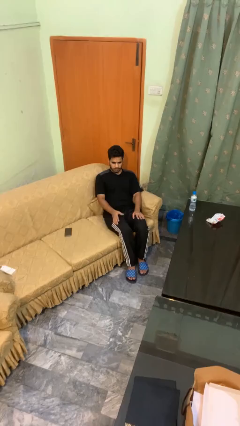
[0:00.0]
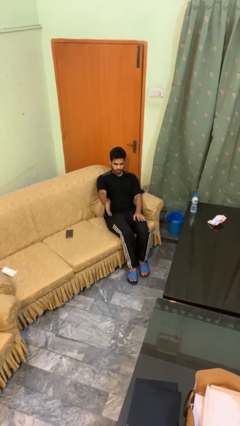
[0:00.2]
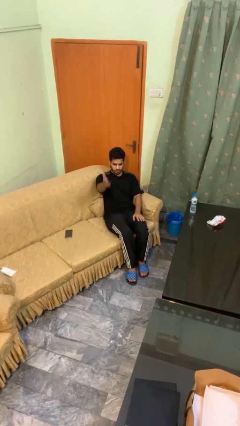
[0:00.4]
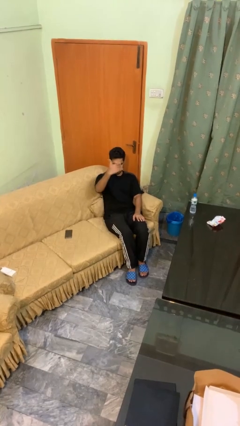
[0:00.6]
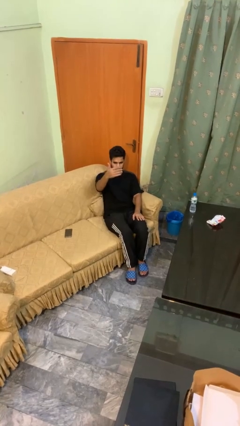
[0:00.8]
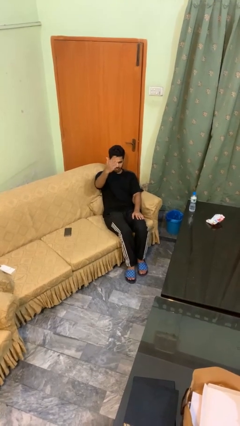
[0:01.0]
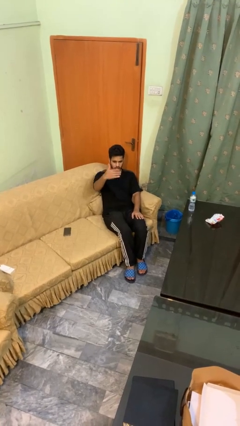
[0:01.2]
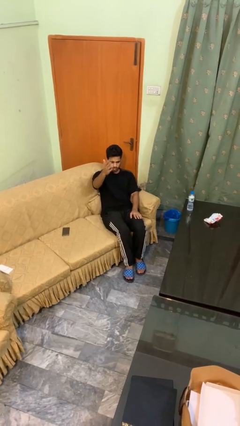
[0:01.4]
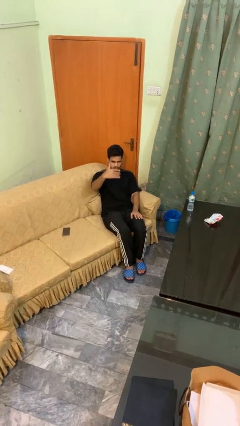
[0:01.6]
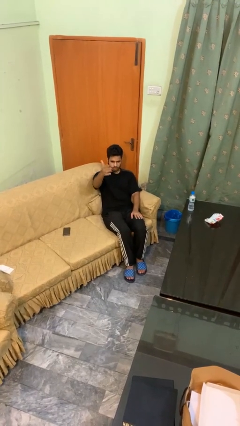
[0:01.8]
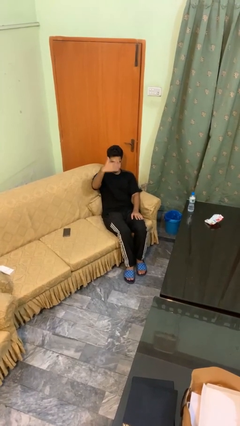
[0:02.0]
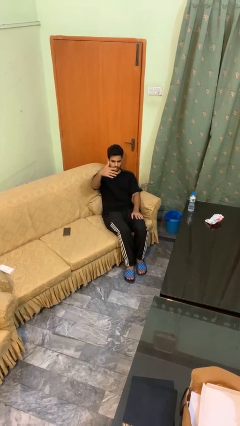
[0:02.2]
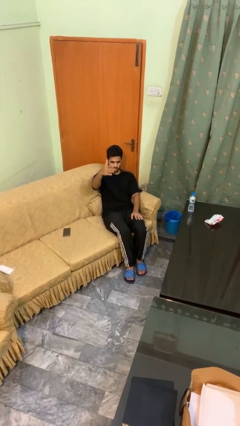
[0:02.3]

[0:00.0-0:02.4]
person gestures come here

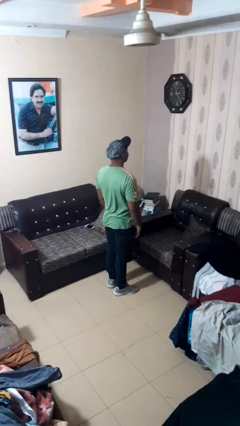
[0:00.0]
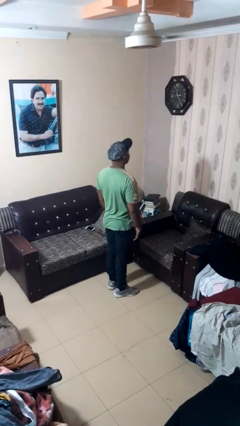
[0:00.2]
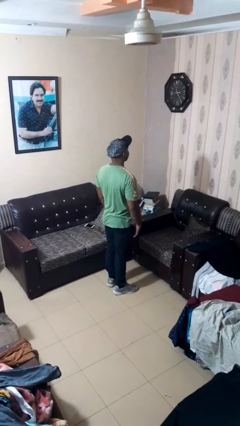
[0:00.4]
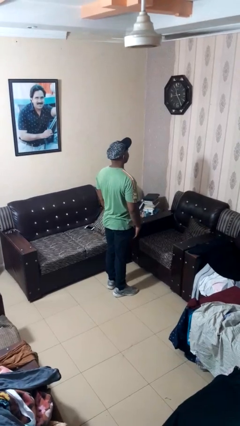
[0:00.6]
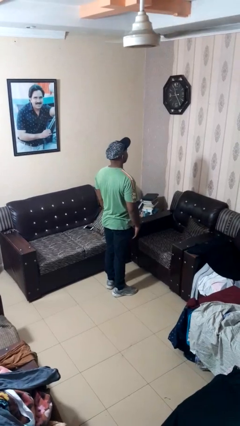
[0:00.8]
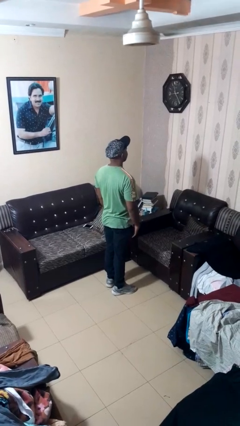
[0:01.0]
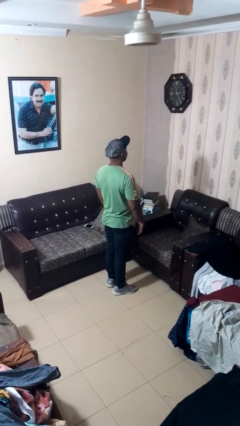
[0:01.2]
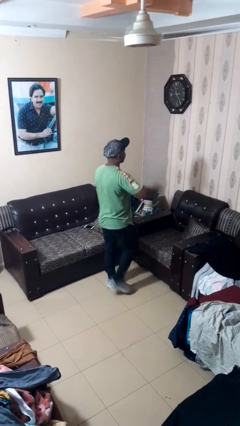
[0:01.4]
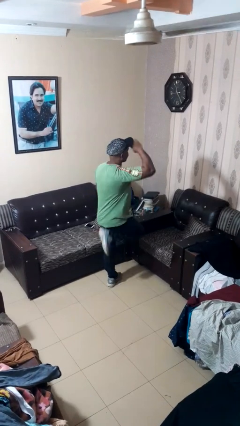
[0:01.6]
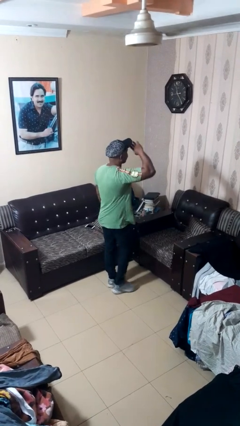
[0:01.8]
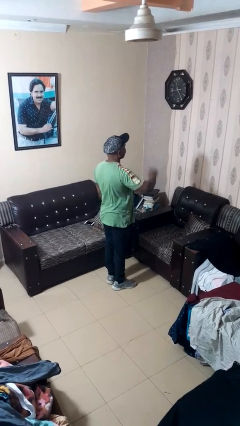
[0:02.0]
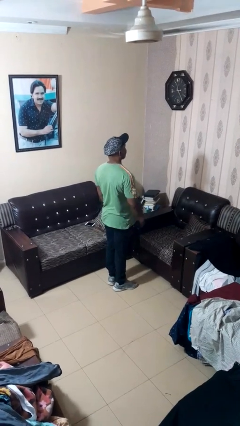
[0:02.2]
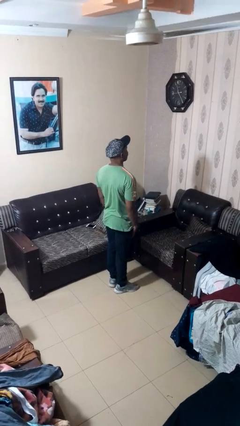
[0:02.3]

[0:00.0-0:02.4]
person salutes

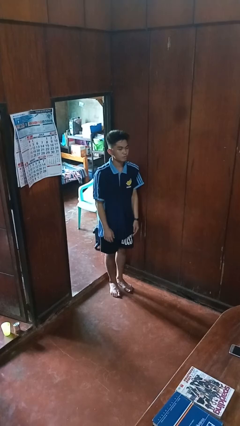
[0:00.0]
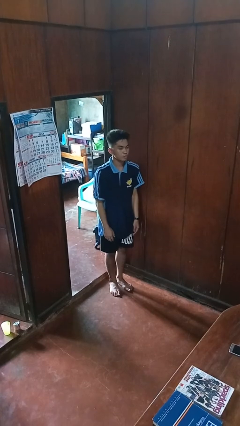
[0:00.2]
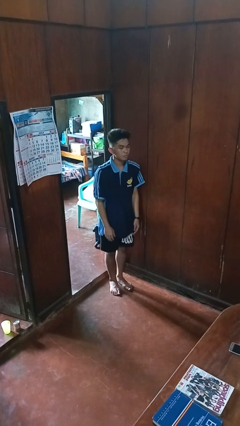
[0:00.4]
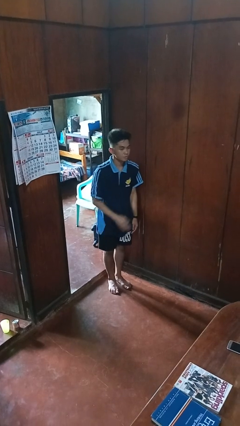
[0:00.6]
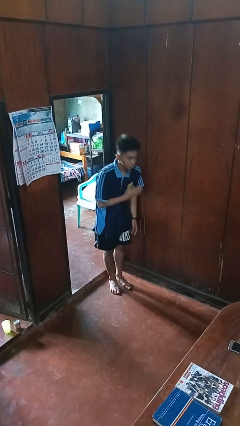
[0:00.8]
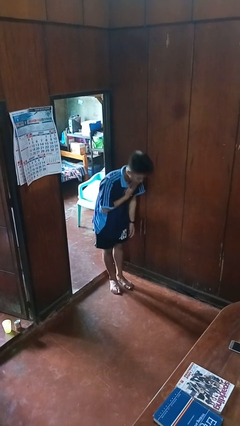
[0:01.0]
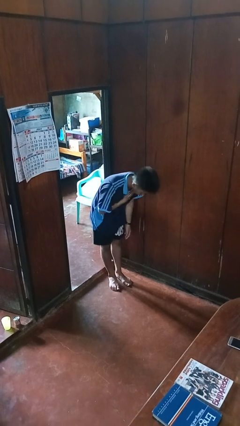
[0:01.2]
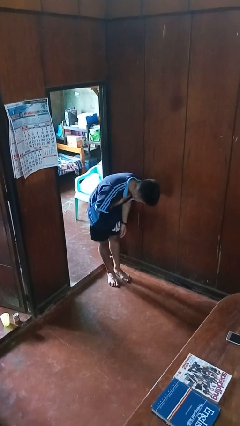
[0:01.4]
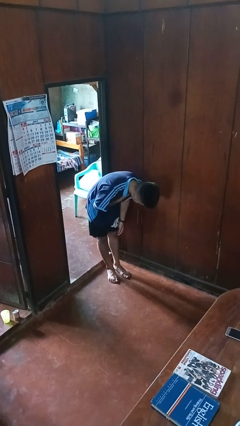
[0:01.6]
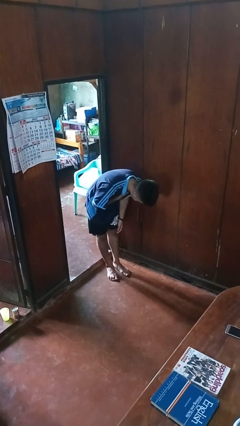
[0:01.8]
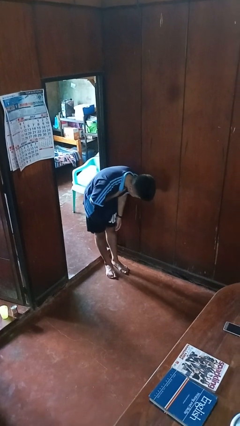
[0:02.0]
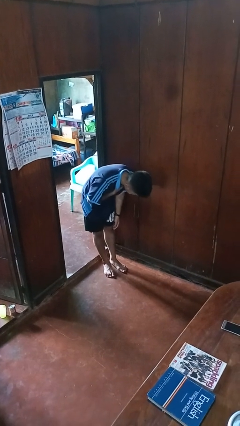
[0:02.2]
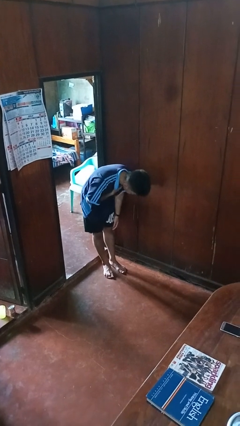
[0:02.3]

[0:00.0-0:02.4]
person bows

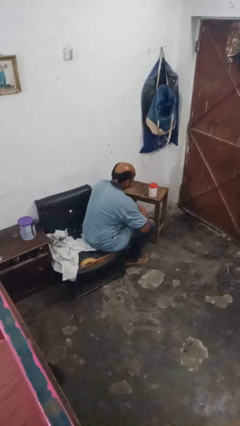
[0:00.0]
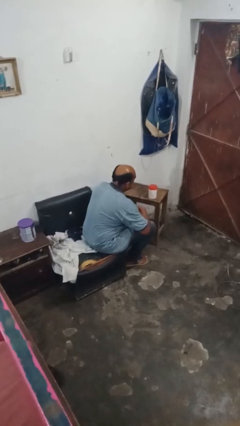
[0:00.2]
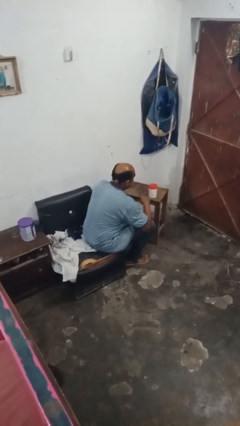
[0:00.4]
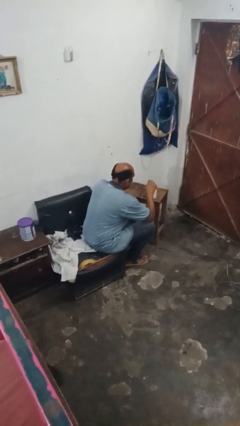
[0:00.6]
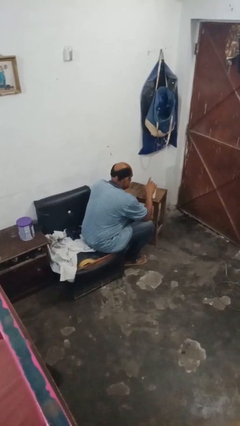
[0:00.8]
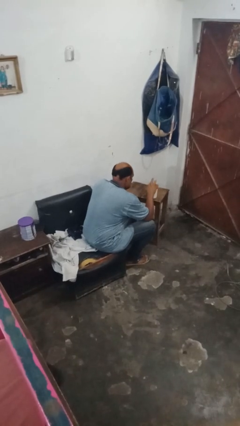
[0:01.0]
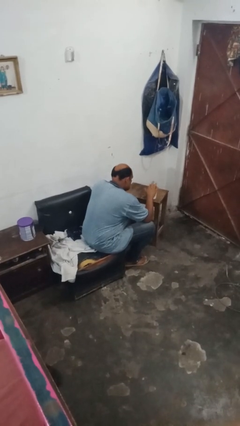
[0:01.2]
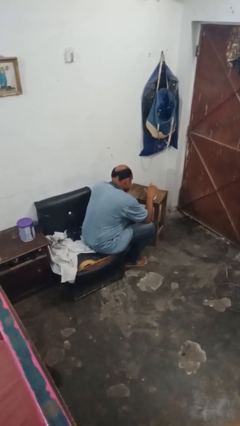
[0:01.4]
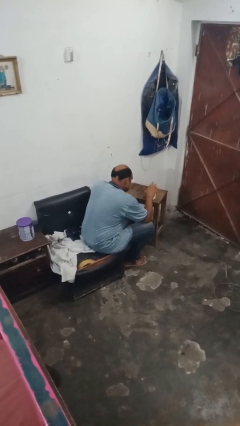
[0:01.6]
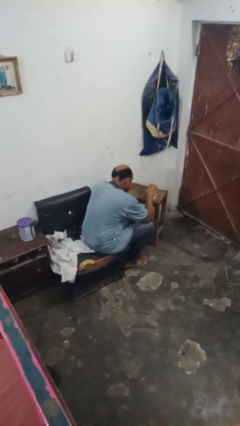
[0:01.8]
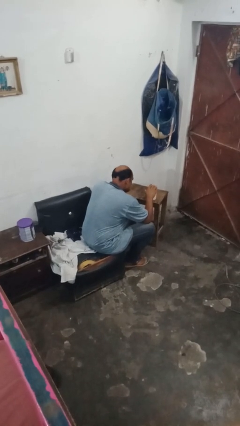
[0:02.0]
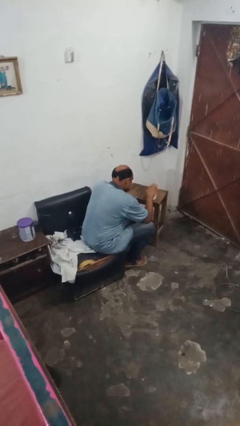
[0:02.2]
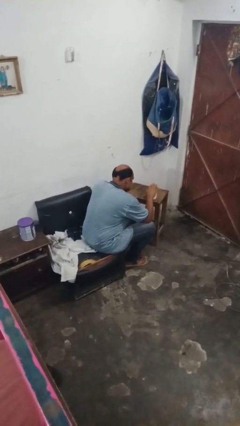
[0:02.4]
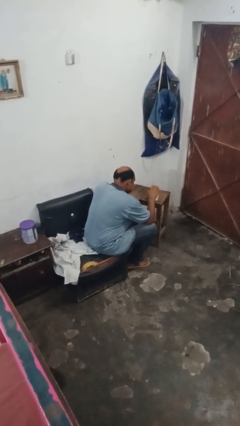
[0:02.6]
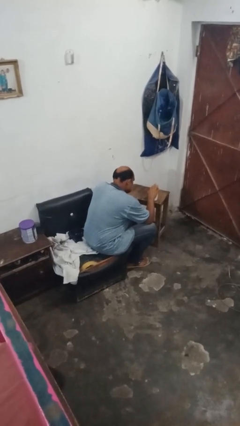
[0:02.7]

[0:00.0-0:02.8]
person taps object with finger

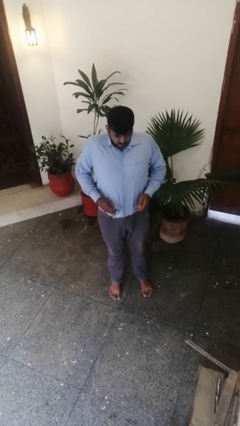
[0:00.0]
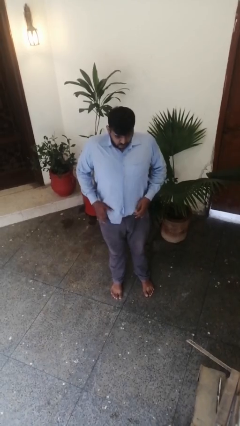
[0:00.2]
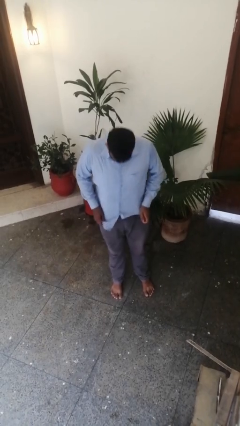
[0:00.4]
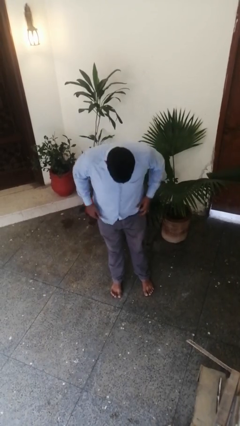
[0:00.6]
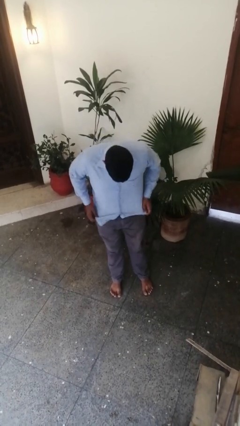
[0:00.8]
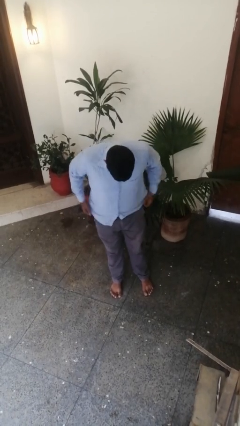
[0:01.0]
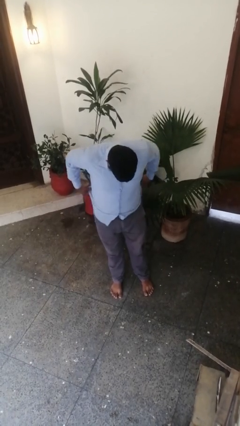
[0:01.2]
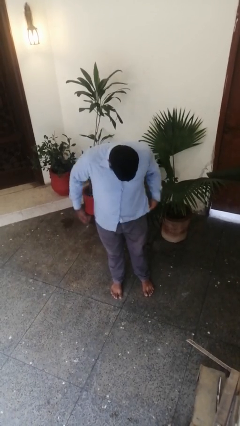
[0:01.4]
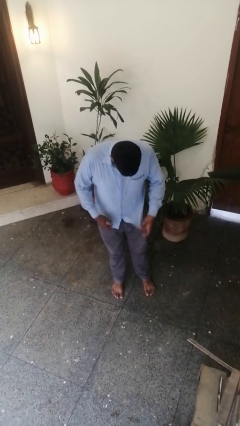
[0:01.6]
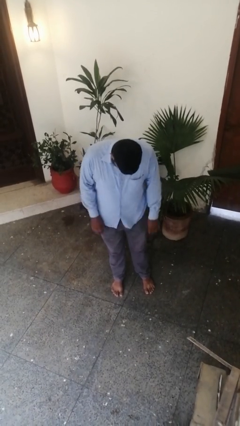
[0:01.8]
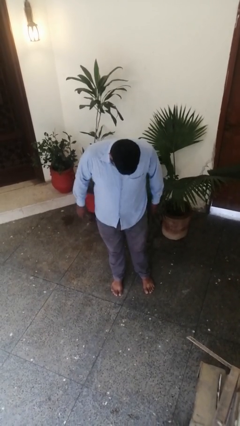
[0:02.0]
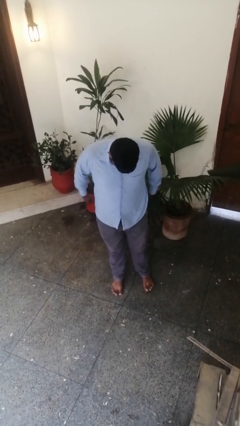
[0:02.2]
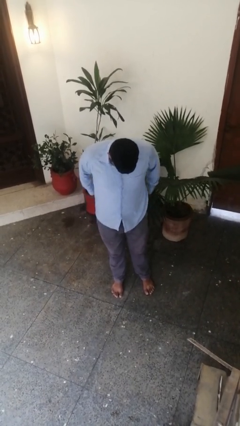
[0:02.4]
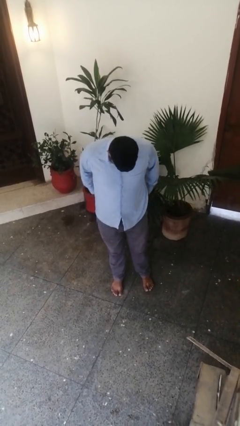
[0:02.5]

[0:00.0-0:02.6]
person untucks shirt

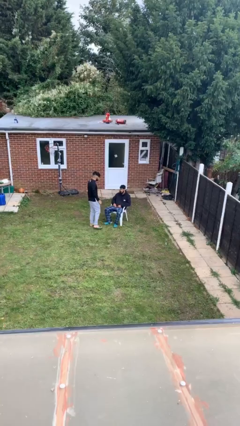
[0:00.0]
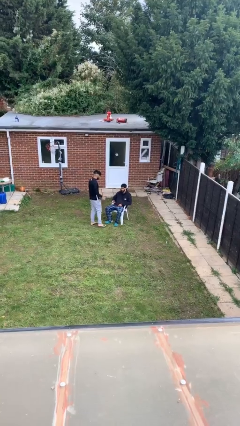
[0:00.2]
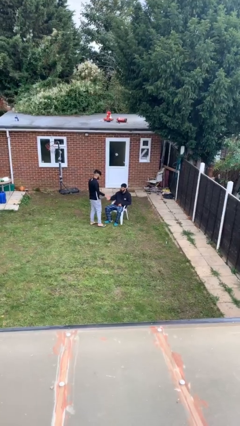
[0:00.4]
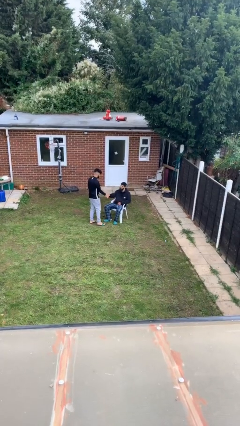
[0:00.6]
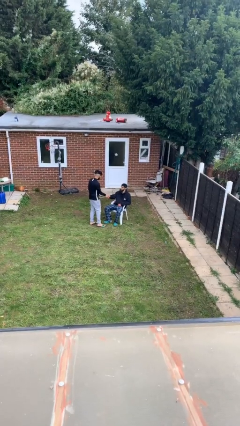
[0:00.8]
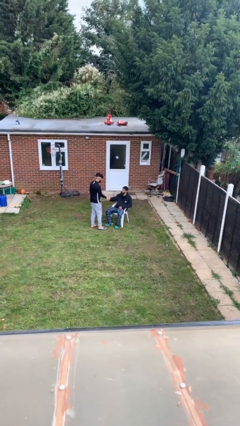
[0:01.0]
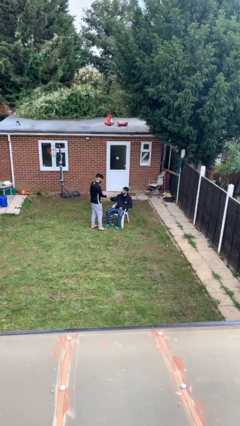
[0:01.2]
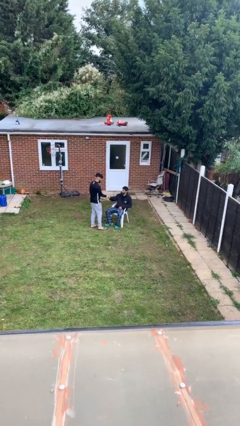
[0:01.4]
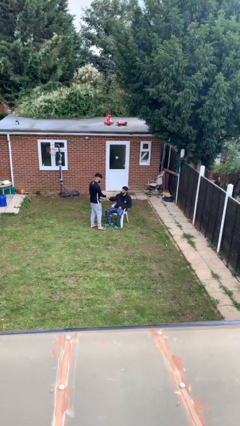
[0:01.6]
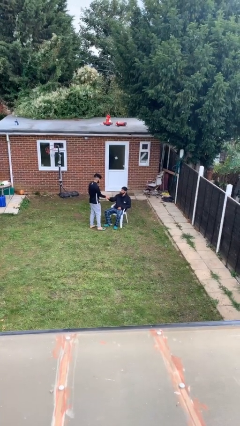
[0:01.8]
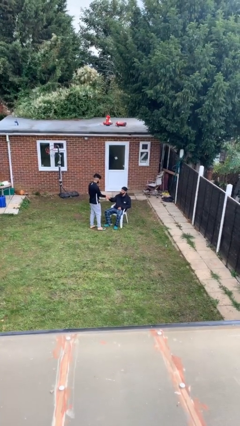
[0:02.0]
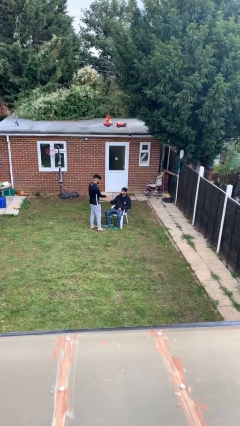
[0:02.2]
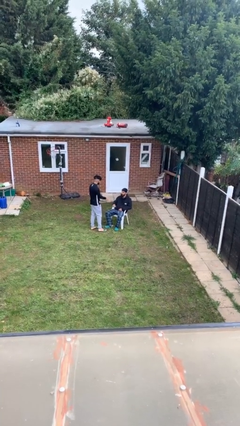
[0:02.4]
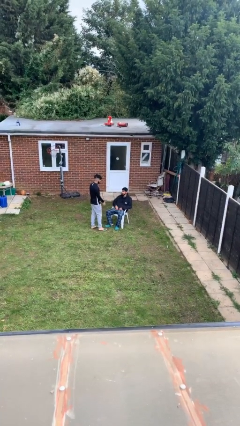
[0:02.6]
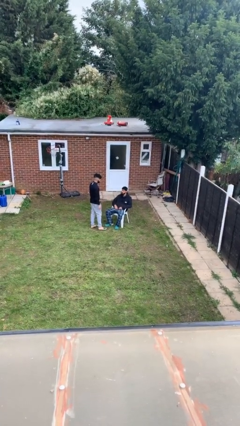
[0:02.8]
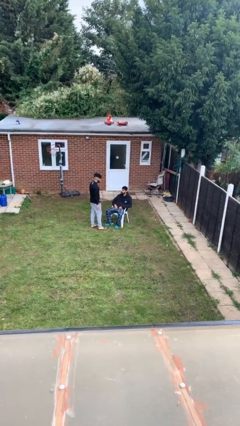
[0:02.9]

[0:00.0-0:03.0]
person shakes hand

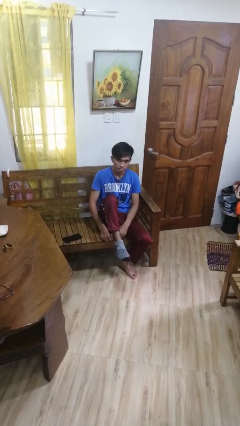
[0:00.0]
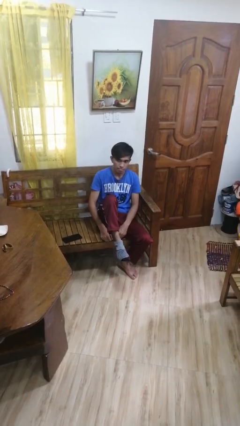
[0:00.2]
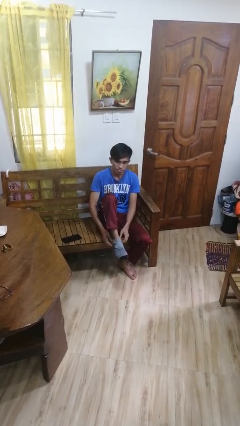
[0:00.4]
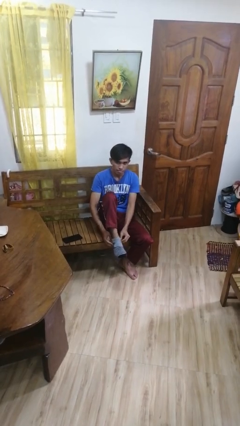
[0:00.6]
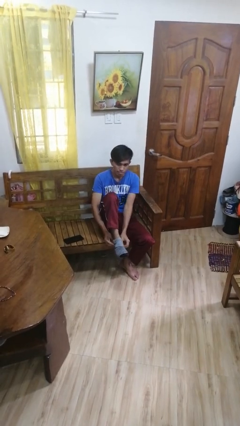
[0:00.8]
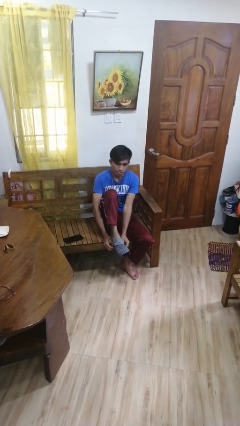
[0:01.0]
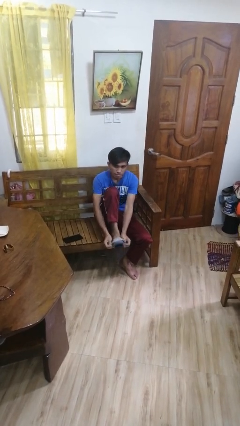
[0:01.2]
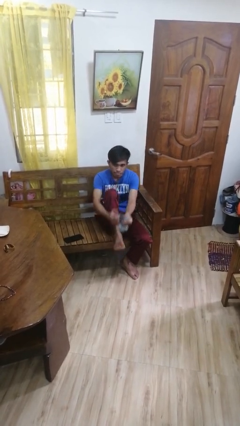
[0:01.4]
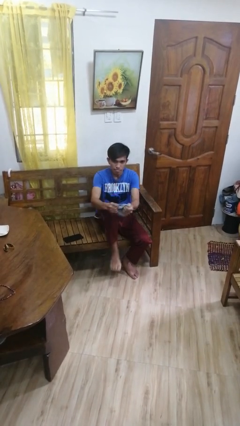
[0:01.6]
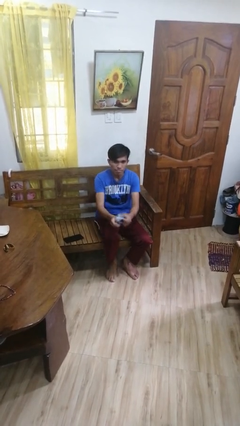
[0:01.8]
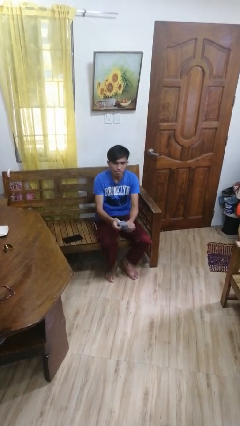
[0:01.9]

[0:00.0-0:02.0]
person takes off socks
